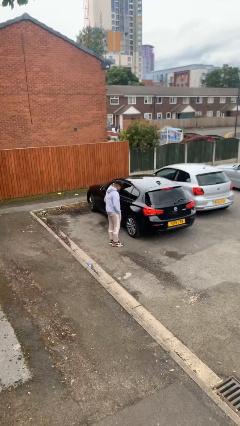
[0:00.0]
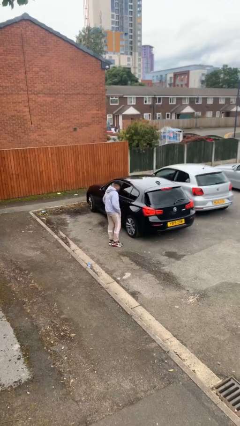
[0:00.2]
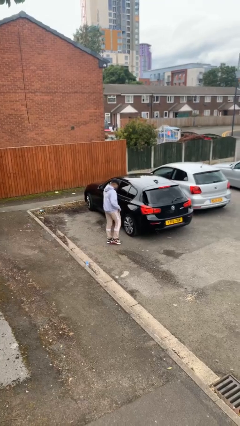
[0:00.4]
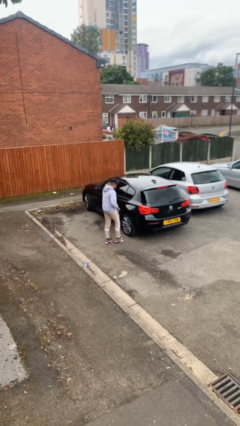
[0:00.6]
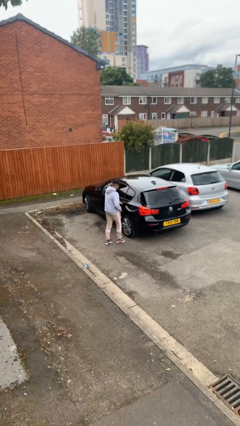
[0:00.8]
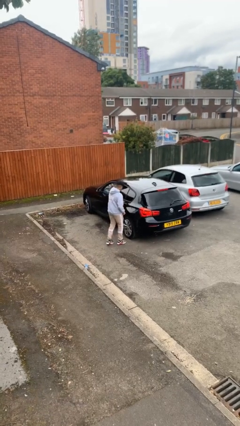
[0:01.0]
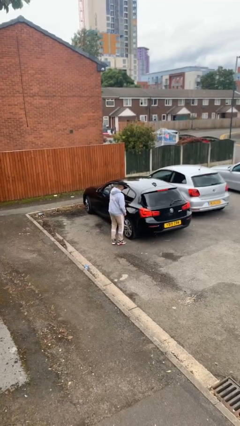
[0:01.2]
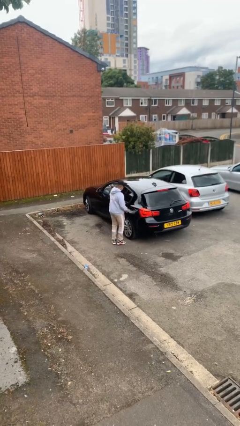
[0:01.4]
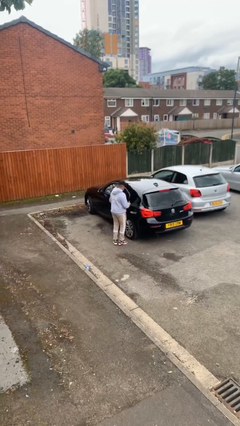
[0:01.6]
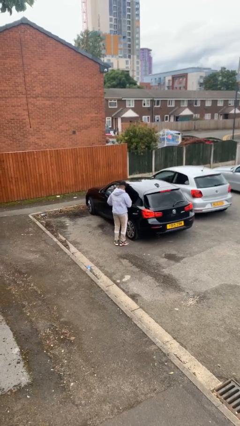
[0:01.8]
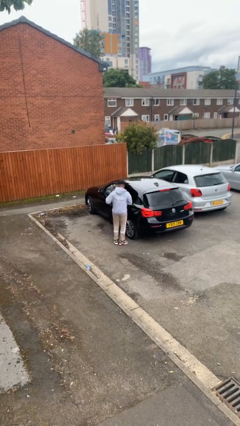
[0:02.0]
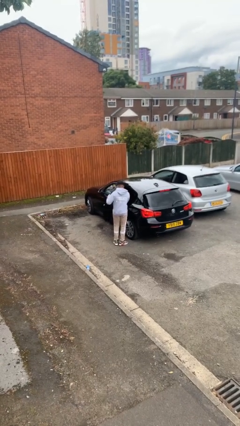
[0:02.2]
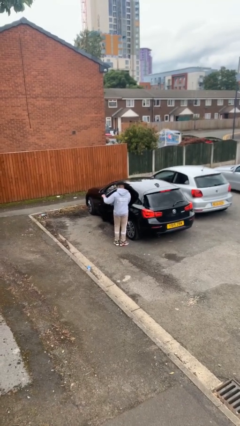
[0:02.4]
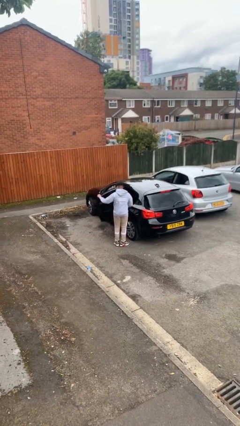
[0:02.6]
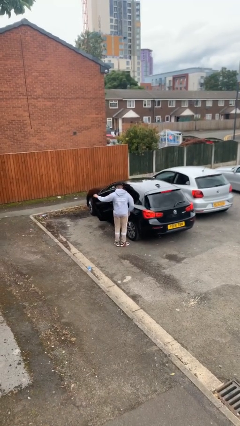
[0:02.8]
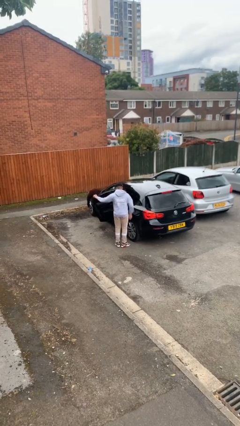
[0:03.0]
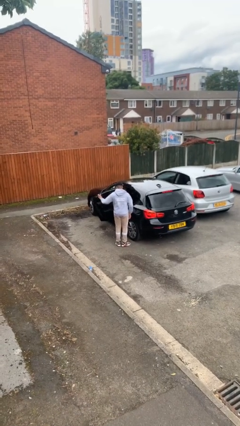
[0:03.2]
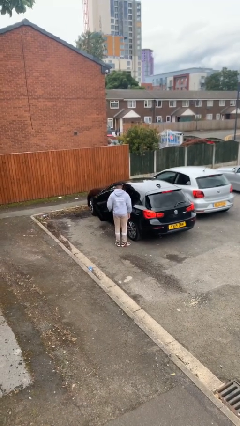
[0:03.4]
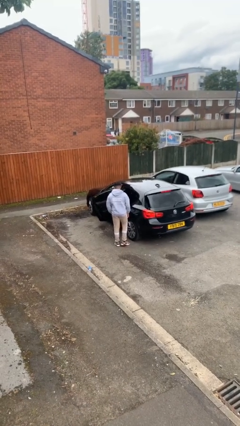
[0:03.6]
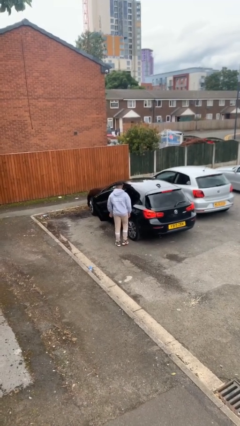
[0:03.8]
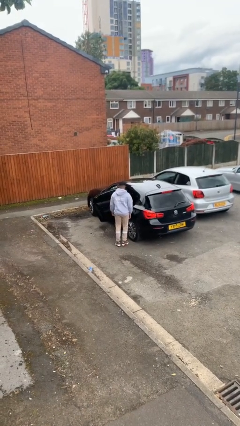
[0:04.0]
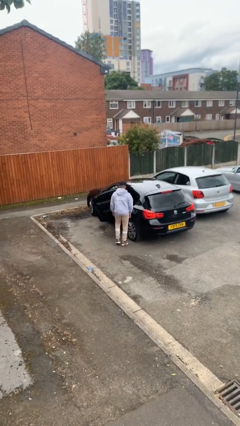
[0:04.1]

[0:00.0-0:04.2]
person opens car door

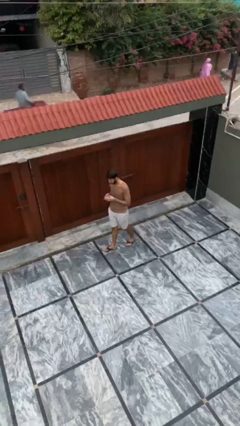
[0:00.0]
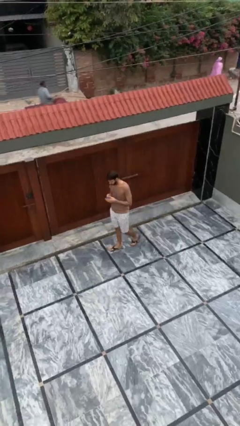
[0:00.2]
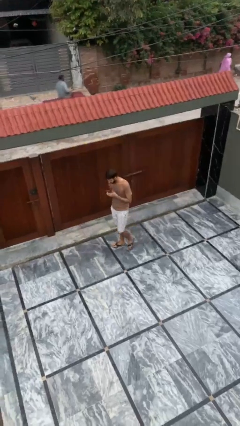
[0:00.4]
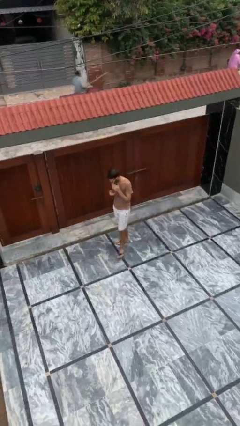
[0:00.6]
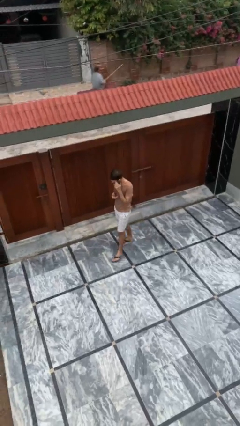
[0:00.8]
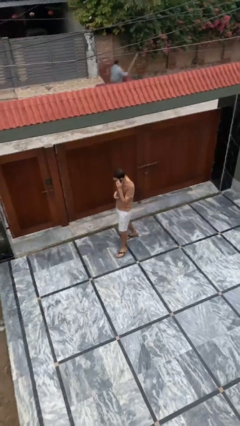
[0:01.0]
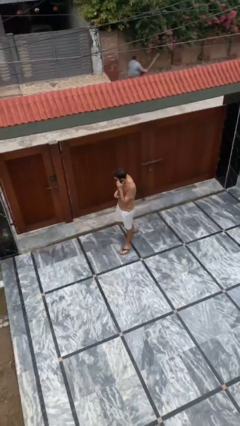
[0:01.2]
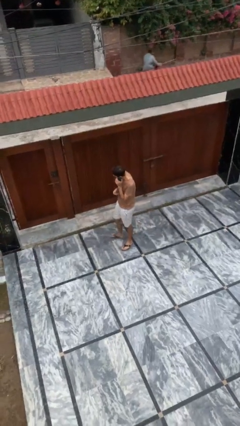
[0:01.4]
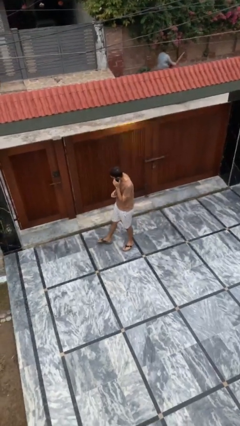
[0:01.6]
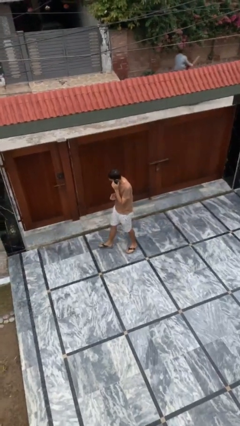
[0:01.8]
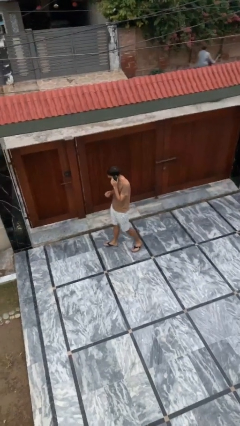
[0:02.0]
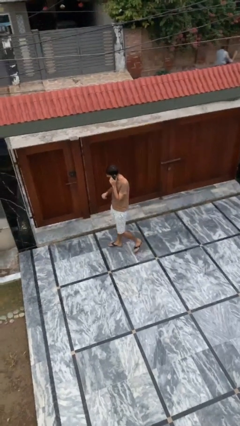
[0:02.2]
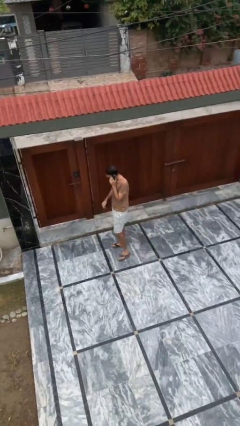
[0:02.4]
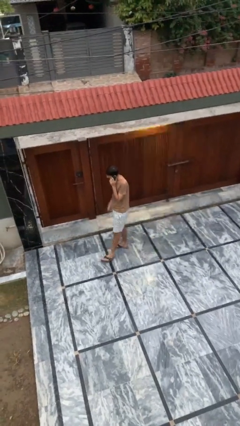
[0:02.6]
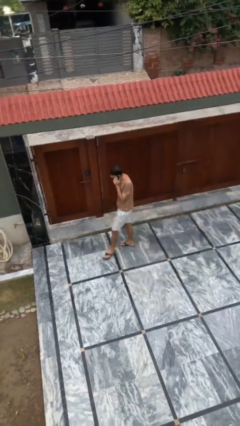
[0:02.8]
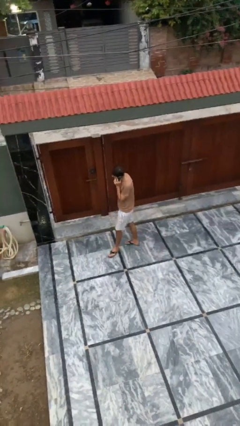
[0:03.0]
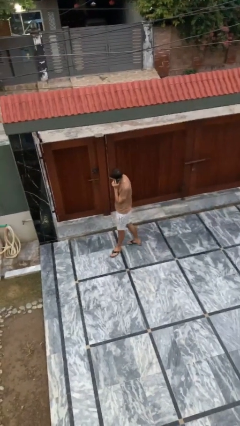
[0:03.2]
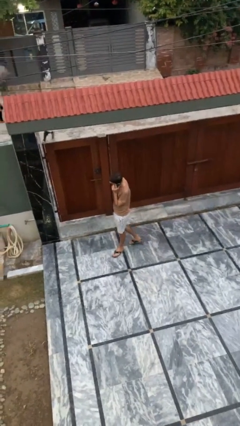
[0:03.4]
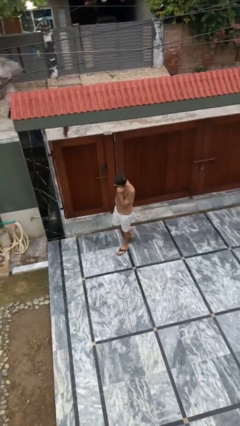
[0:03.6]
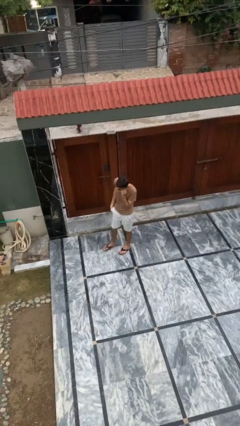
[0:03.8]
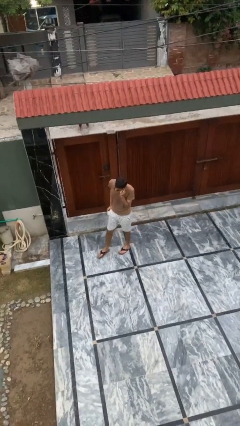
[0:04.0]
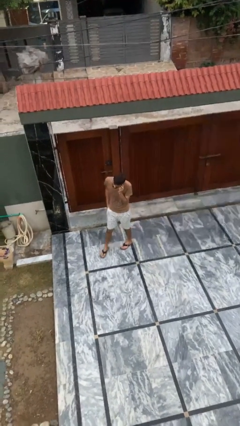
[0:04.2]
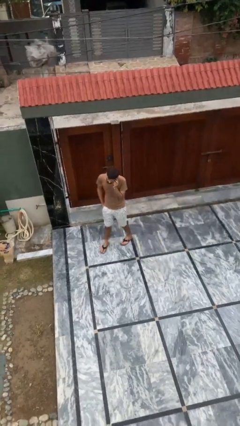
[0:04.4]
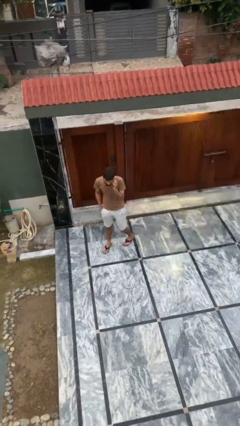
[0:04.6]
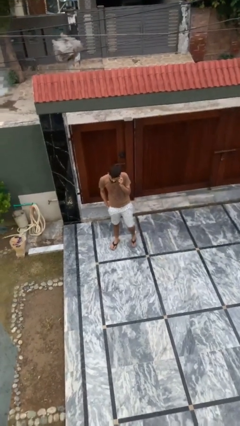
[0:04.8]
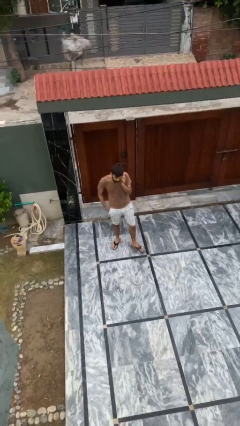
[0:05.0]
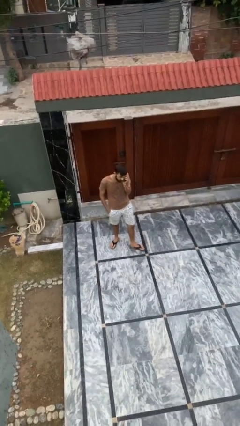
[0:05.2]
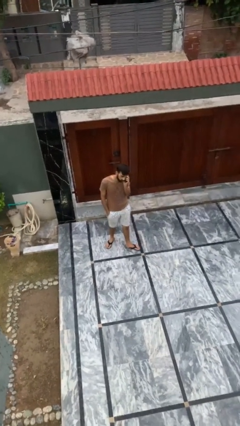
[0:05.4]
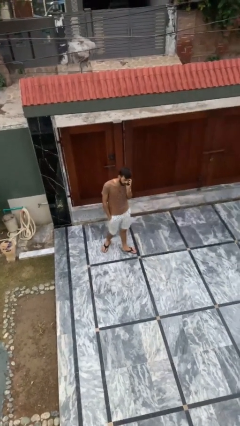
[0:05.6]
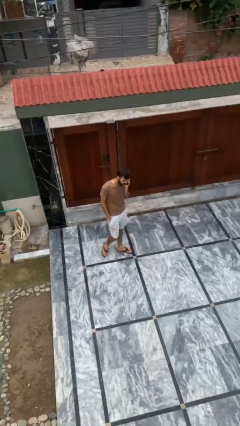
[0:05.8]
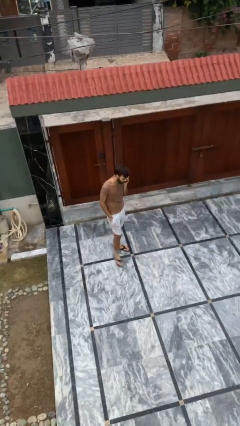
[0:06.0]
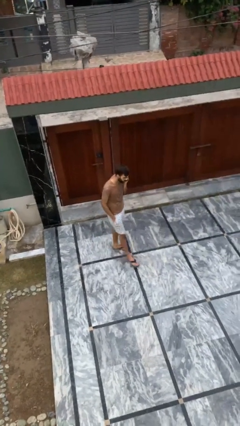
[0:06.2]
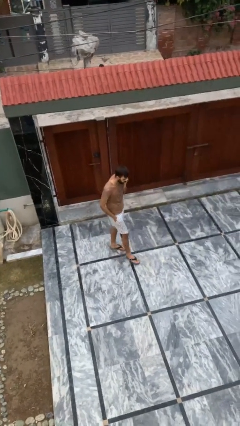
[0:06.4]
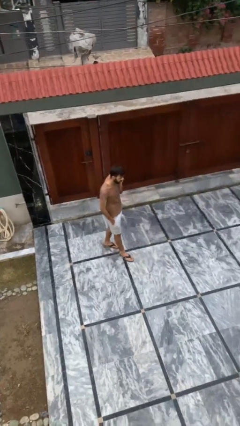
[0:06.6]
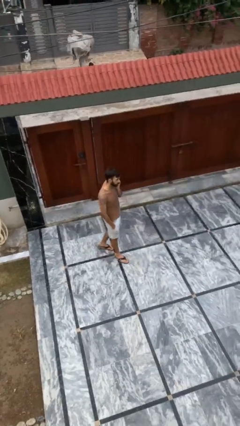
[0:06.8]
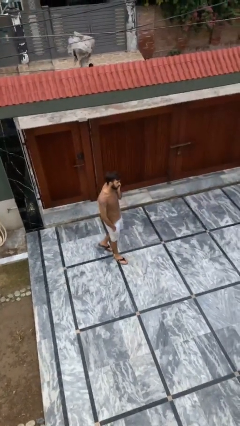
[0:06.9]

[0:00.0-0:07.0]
person talks on phone

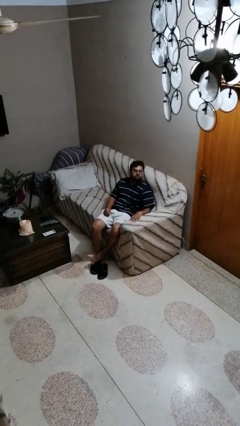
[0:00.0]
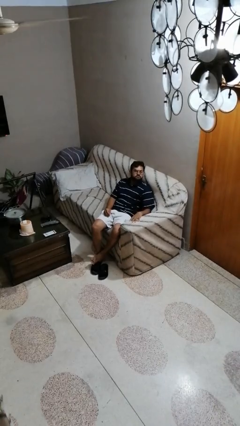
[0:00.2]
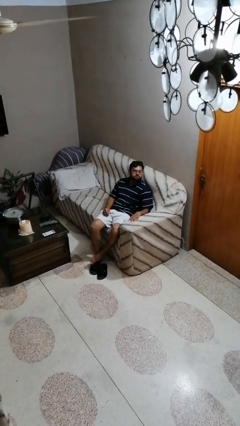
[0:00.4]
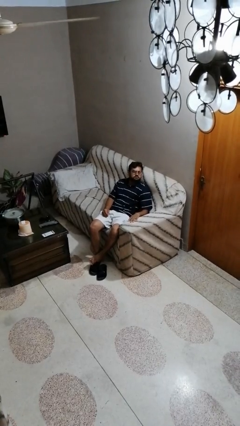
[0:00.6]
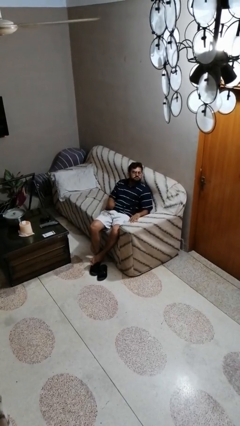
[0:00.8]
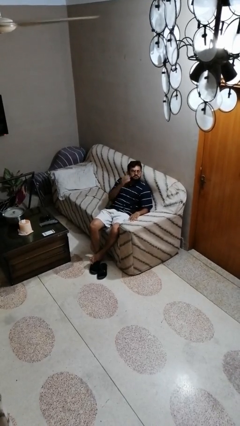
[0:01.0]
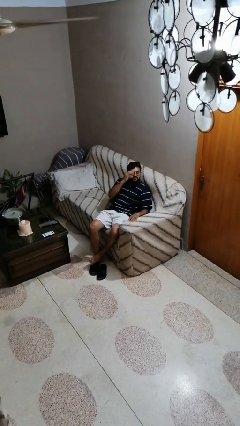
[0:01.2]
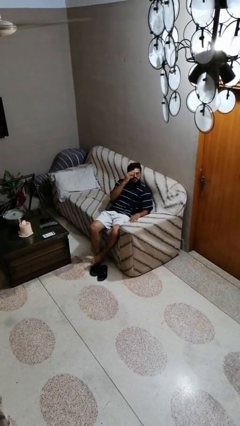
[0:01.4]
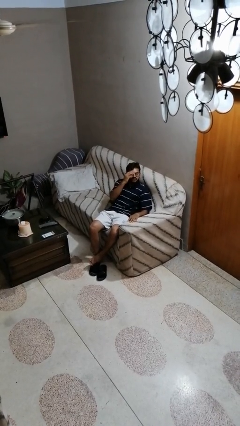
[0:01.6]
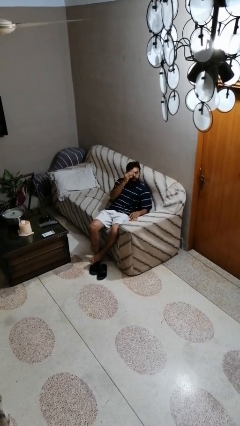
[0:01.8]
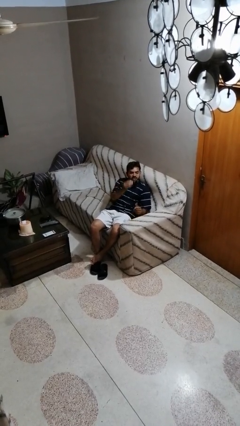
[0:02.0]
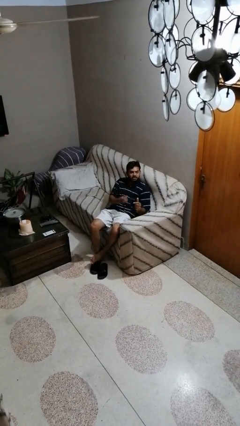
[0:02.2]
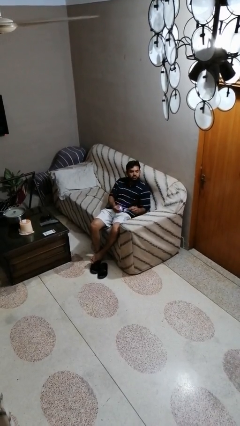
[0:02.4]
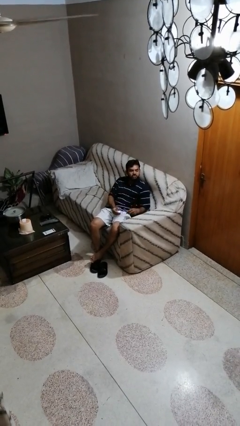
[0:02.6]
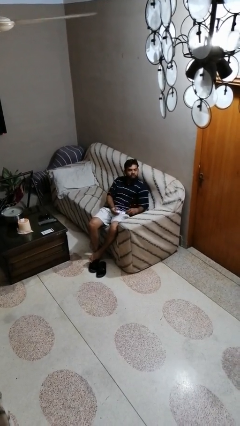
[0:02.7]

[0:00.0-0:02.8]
person takes off glasses

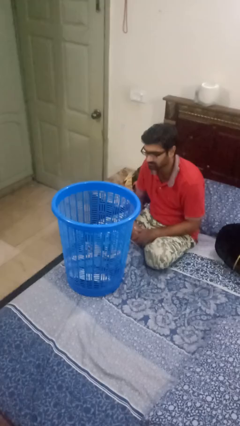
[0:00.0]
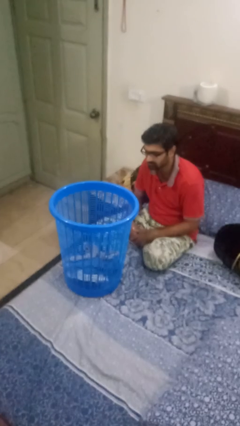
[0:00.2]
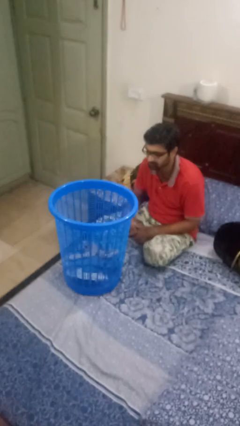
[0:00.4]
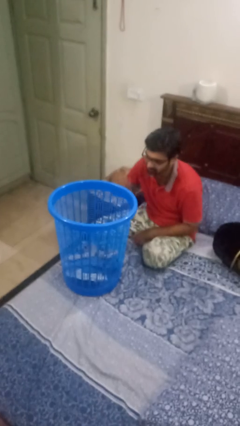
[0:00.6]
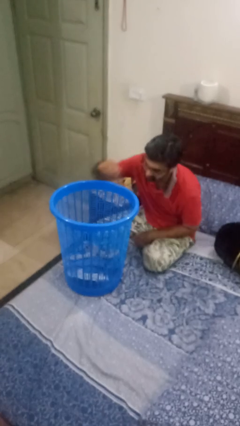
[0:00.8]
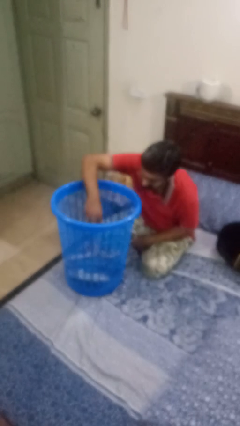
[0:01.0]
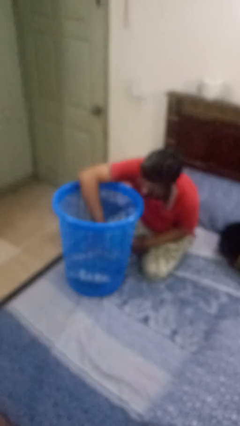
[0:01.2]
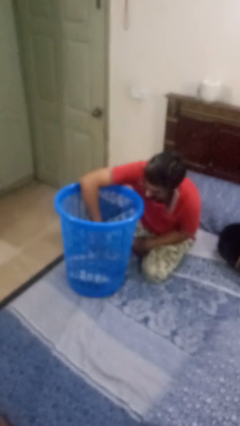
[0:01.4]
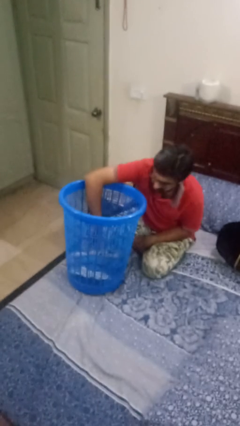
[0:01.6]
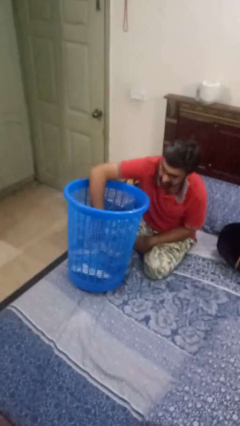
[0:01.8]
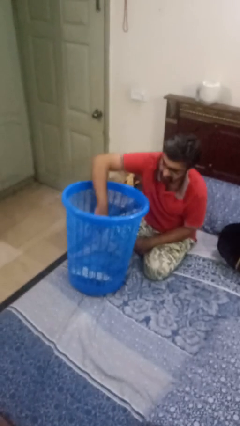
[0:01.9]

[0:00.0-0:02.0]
person takes object from basket

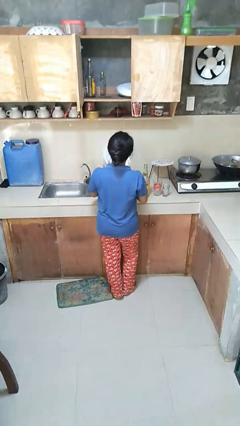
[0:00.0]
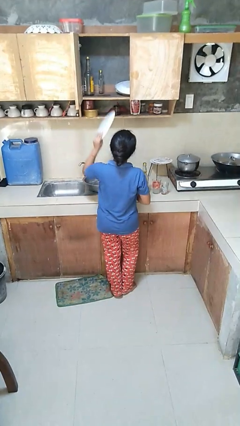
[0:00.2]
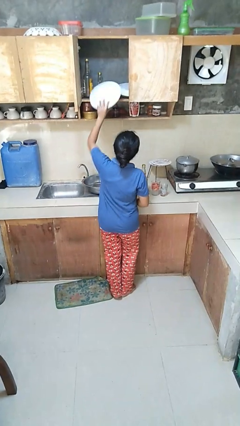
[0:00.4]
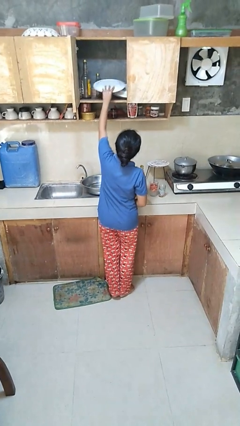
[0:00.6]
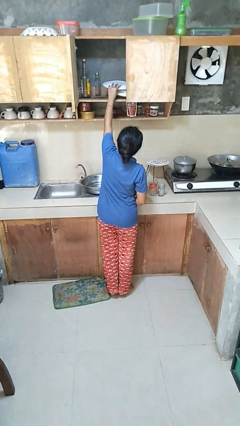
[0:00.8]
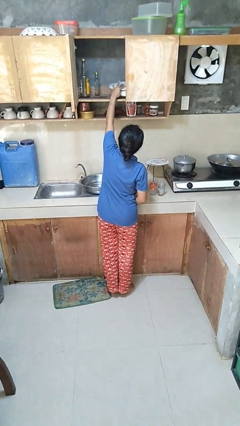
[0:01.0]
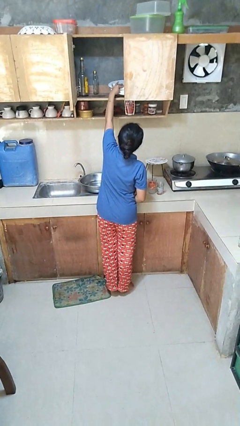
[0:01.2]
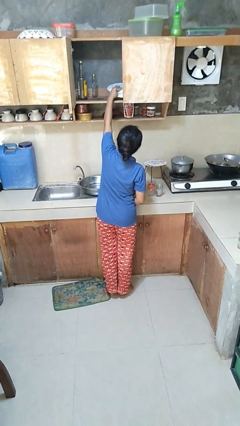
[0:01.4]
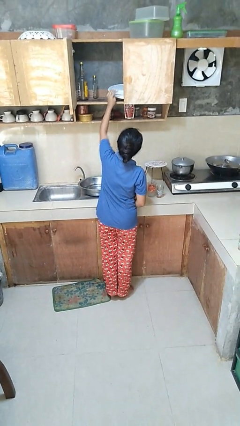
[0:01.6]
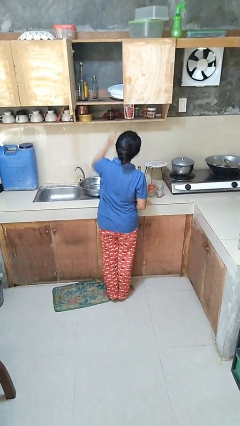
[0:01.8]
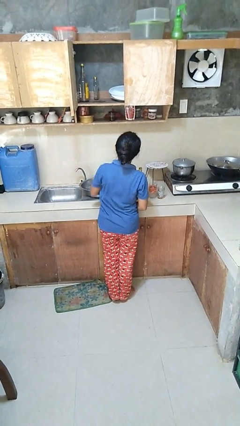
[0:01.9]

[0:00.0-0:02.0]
person puts object in cabinet
